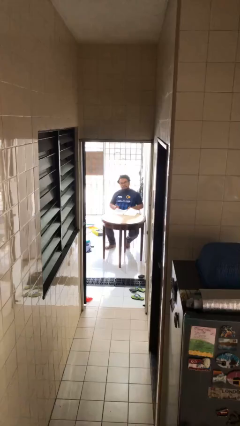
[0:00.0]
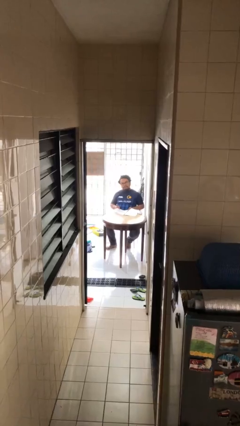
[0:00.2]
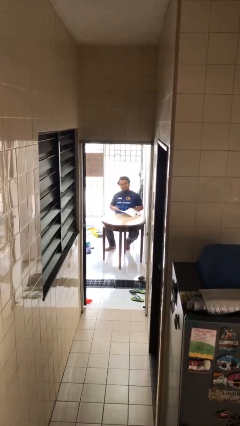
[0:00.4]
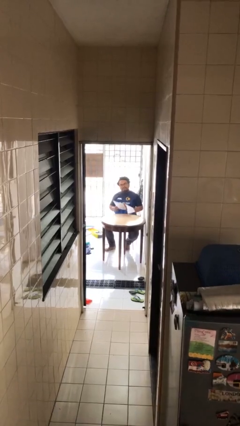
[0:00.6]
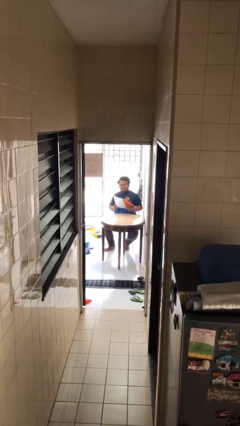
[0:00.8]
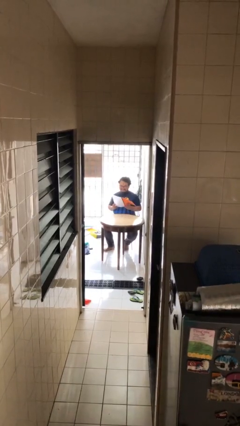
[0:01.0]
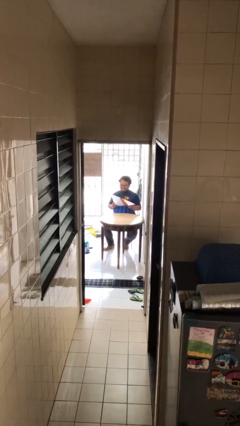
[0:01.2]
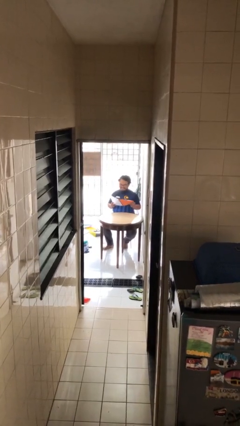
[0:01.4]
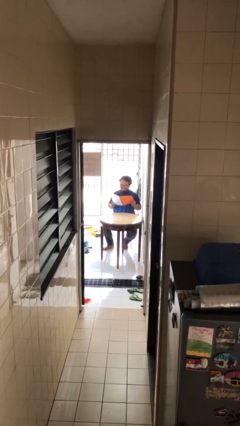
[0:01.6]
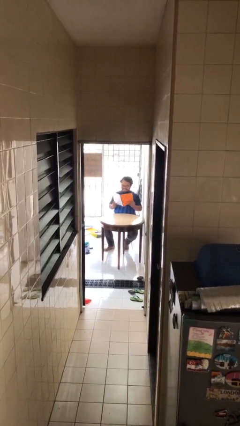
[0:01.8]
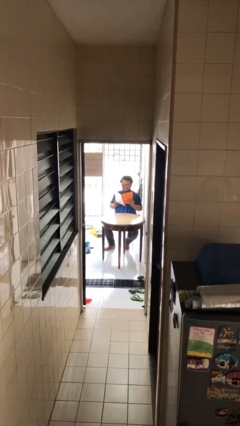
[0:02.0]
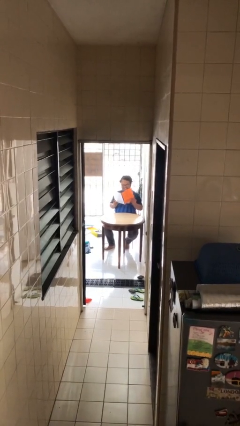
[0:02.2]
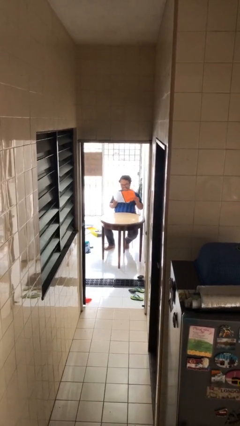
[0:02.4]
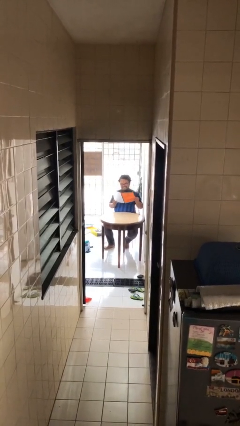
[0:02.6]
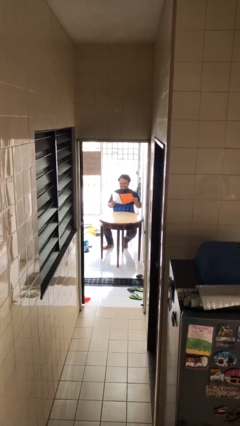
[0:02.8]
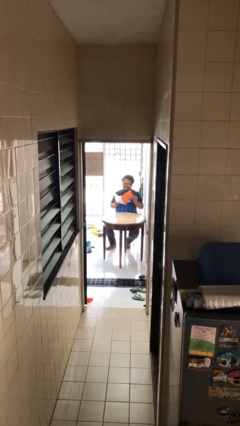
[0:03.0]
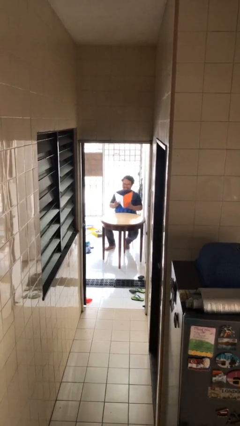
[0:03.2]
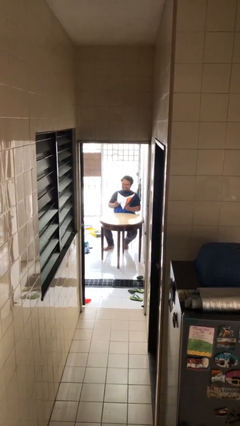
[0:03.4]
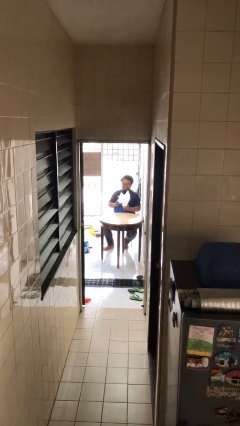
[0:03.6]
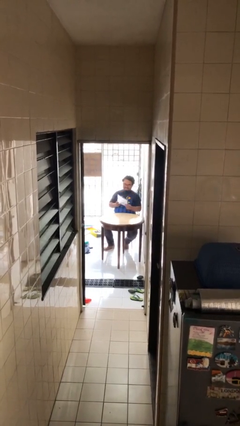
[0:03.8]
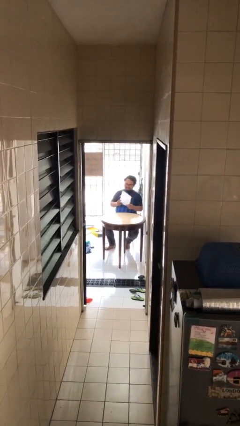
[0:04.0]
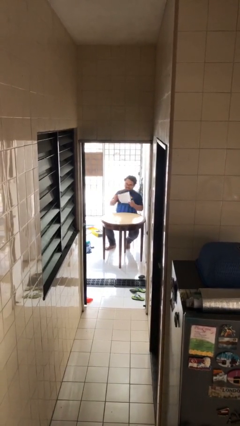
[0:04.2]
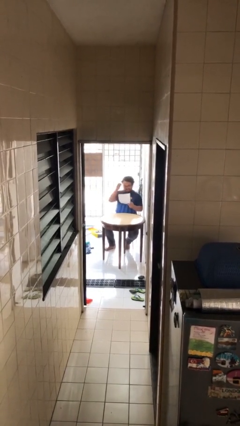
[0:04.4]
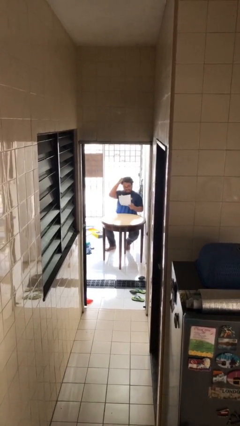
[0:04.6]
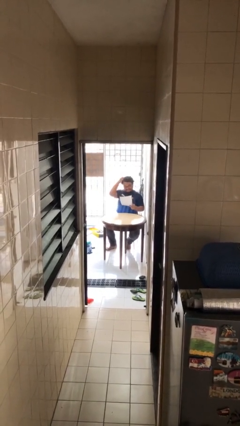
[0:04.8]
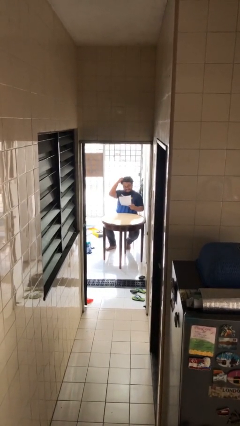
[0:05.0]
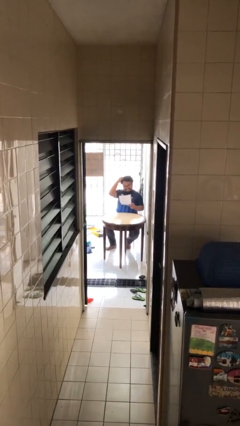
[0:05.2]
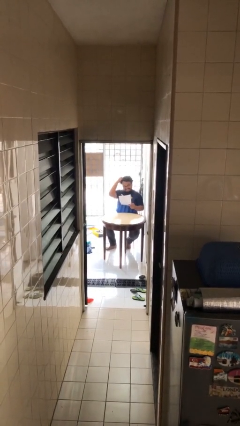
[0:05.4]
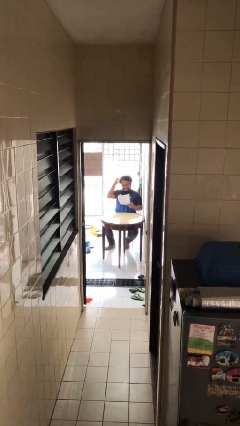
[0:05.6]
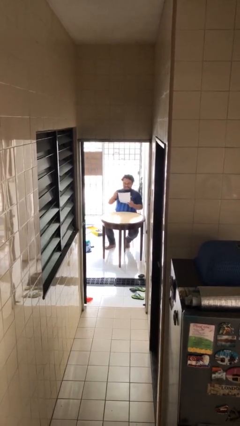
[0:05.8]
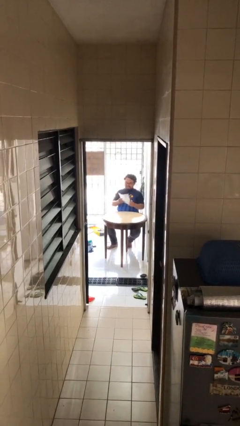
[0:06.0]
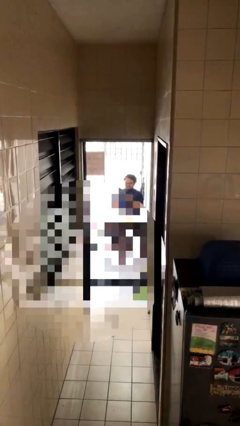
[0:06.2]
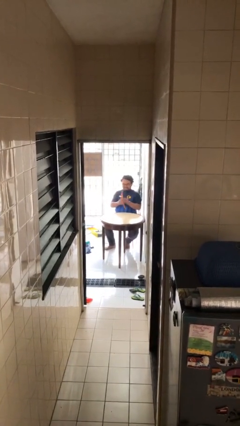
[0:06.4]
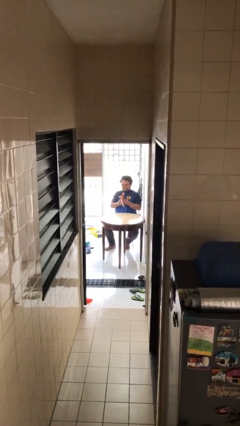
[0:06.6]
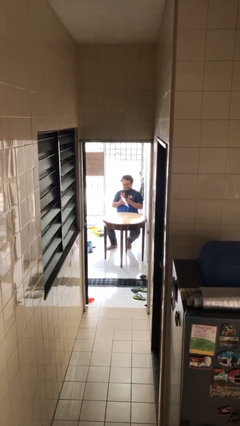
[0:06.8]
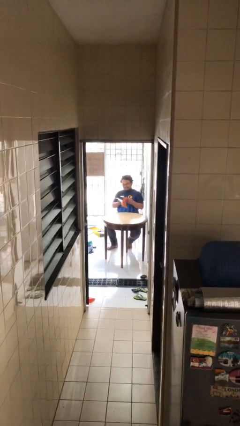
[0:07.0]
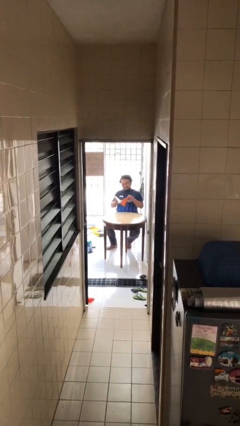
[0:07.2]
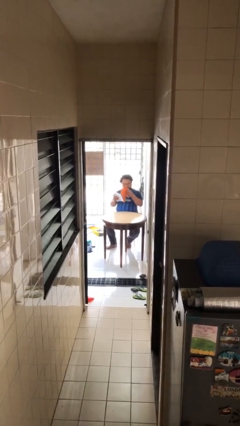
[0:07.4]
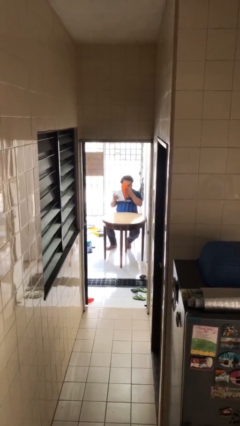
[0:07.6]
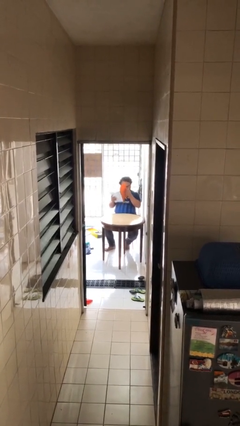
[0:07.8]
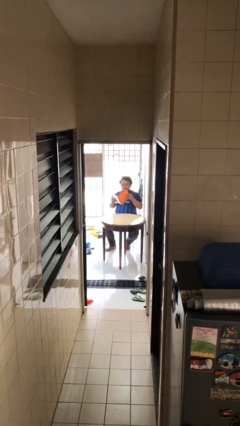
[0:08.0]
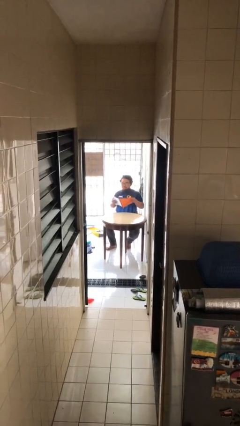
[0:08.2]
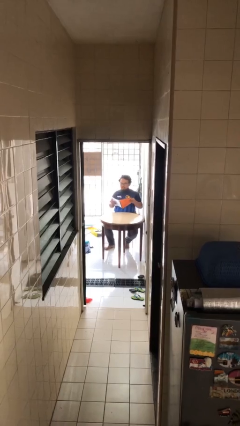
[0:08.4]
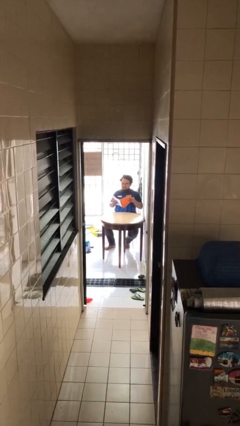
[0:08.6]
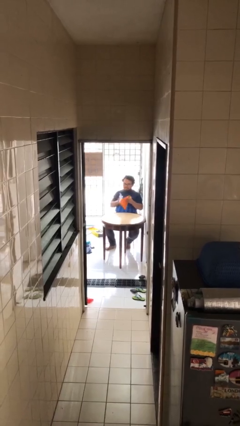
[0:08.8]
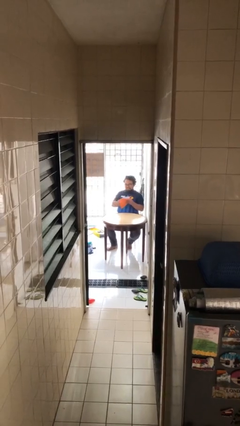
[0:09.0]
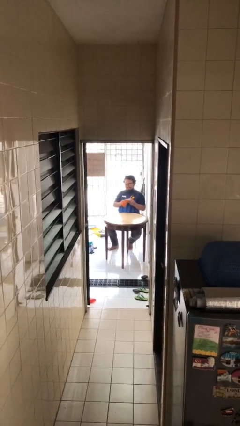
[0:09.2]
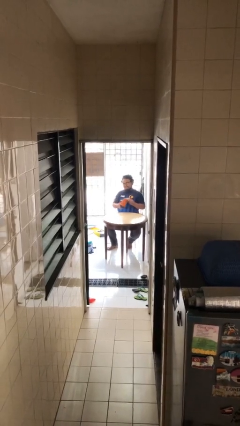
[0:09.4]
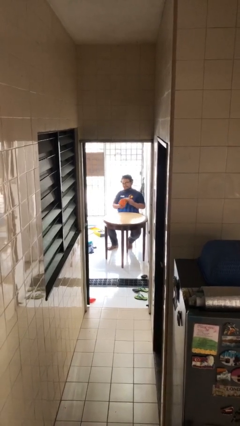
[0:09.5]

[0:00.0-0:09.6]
person reads document

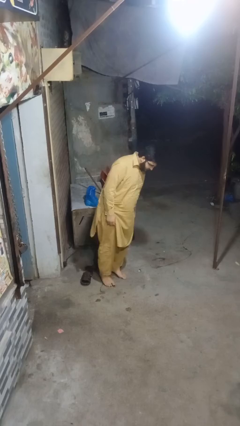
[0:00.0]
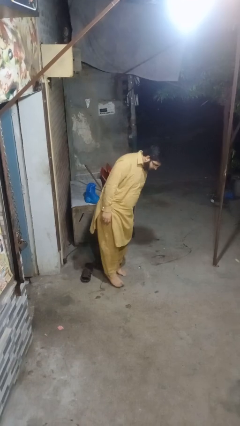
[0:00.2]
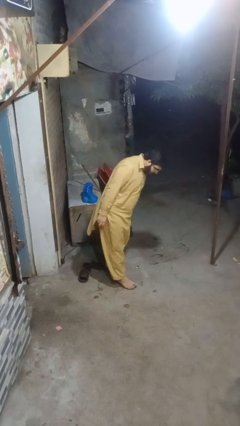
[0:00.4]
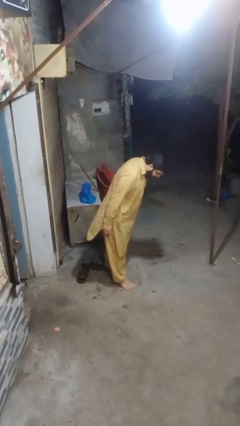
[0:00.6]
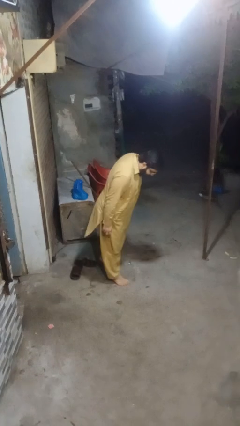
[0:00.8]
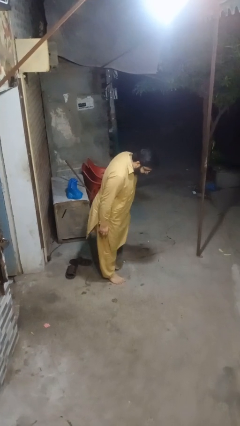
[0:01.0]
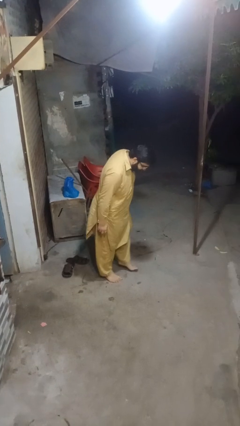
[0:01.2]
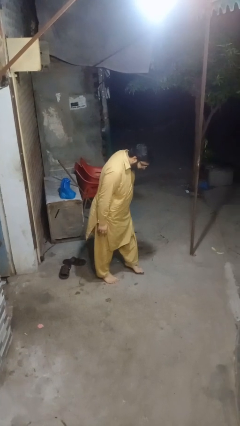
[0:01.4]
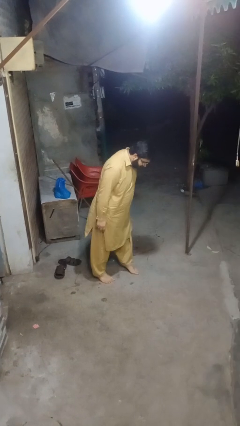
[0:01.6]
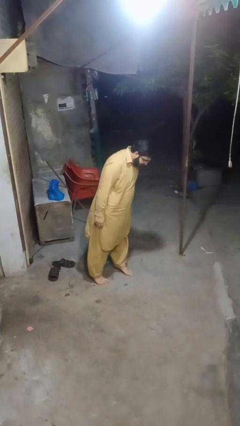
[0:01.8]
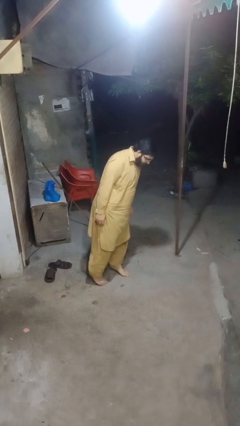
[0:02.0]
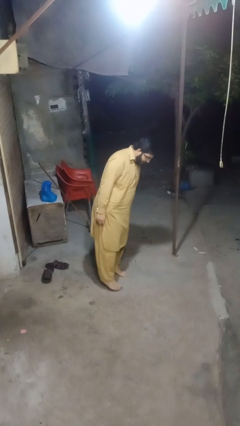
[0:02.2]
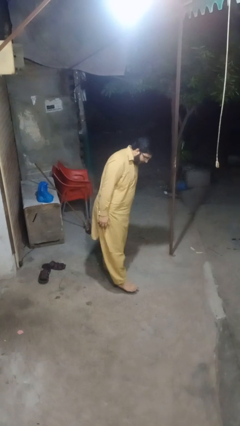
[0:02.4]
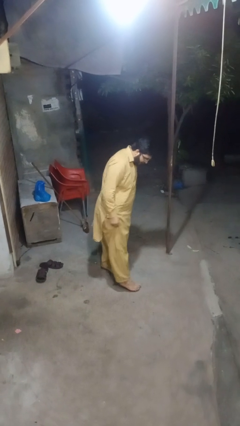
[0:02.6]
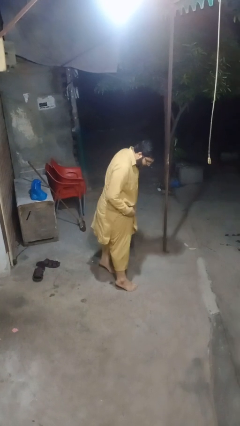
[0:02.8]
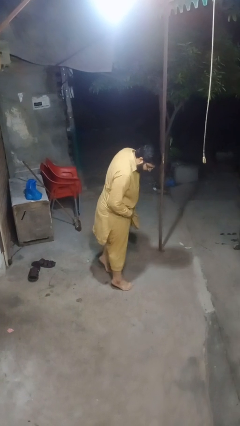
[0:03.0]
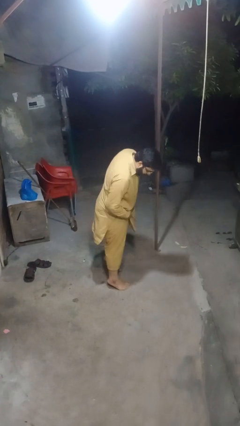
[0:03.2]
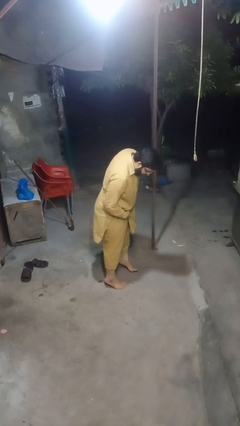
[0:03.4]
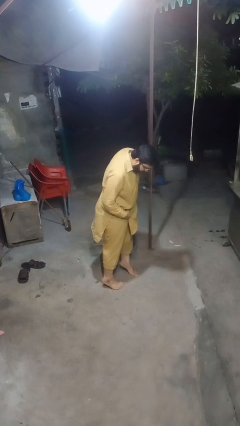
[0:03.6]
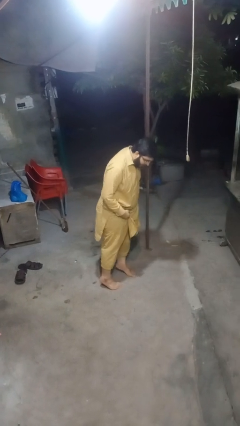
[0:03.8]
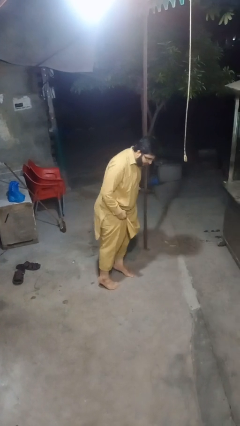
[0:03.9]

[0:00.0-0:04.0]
person walks tiptoe

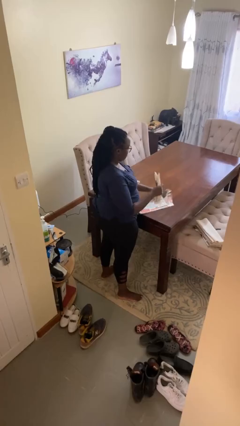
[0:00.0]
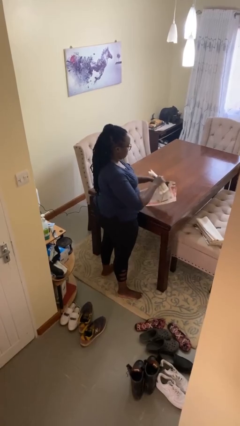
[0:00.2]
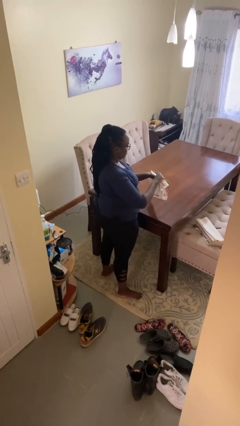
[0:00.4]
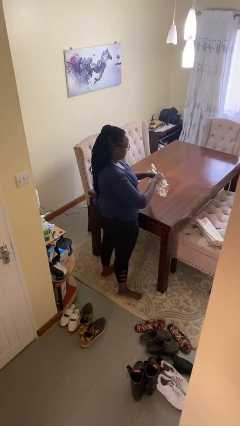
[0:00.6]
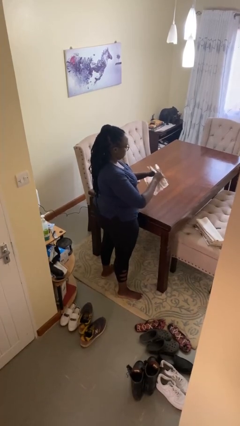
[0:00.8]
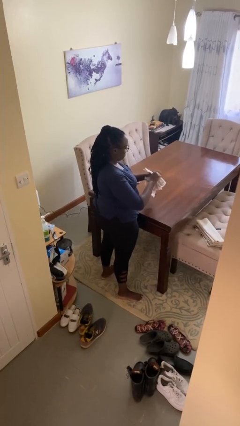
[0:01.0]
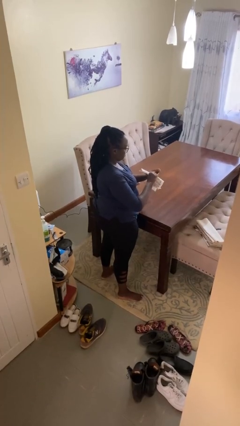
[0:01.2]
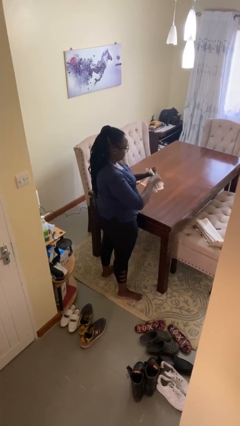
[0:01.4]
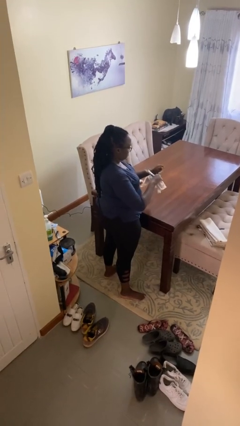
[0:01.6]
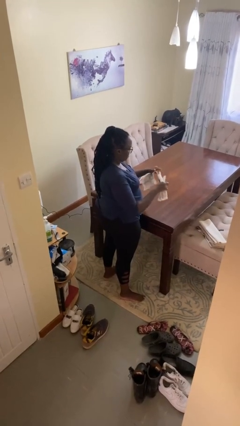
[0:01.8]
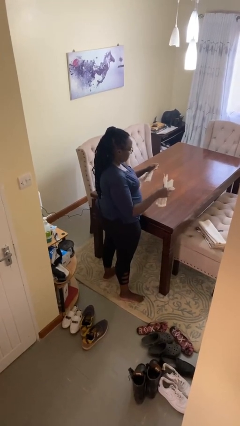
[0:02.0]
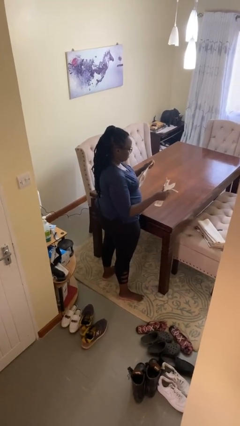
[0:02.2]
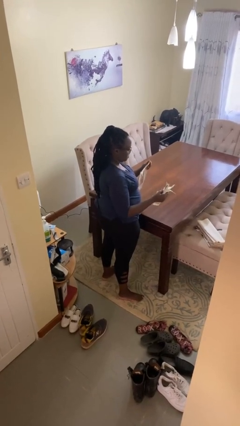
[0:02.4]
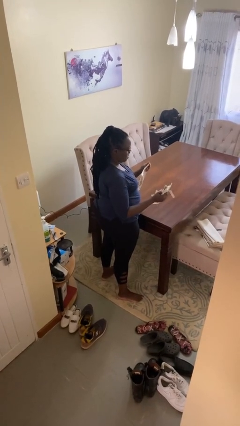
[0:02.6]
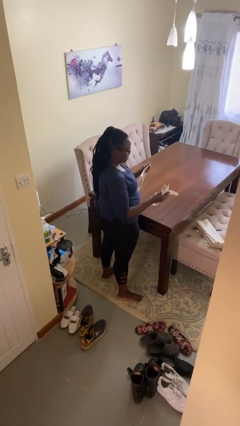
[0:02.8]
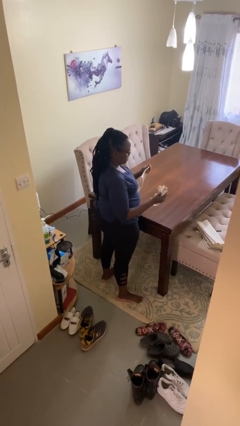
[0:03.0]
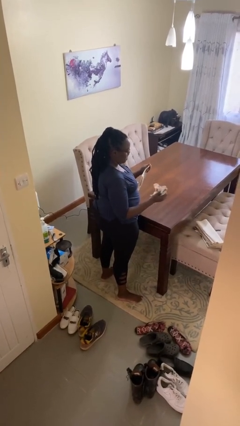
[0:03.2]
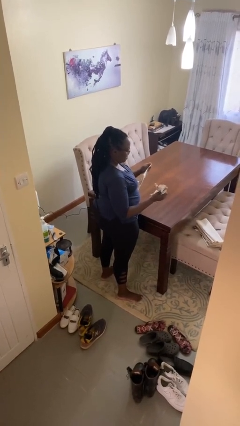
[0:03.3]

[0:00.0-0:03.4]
person tears paper

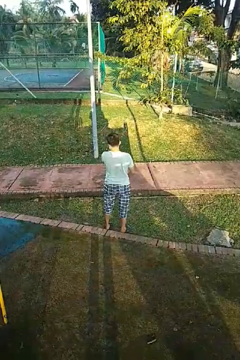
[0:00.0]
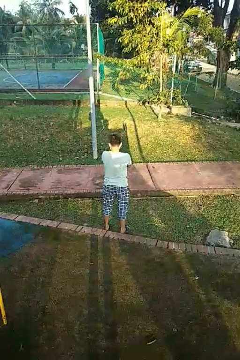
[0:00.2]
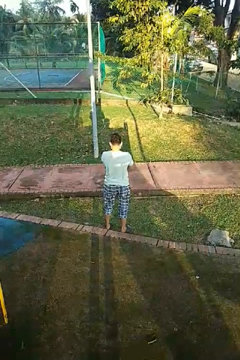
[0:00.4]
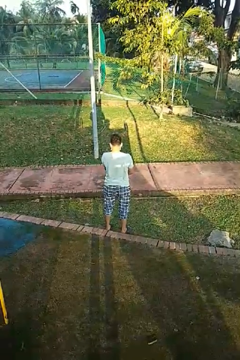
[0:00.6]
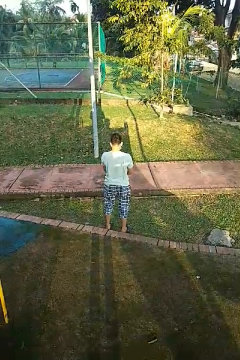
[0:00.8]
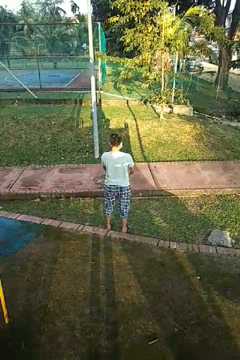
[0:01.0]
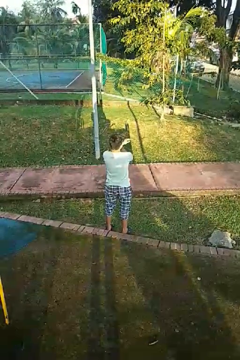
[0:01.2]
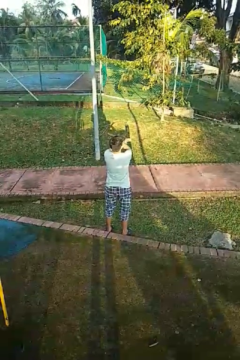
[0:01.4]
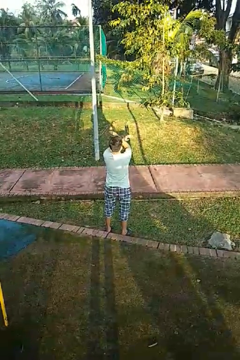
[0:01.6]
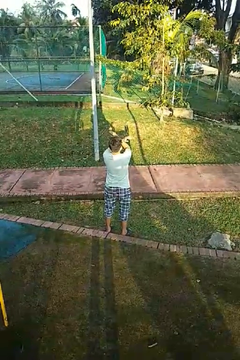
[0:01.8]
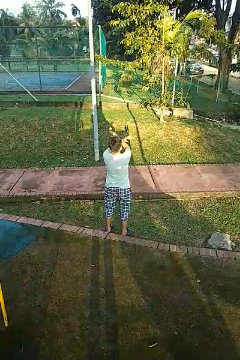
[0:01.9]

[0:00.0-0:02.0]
person gestures arms x
